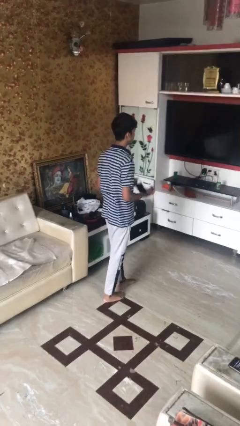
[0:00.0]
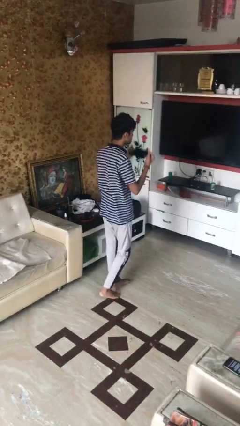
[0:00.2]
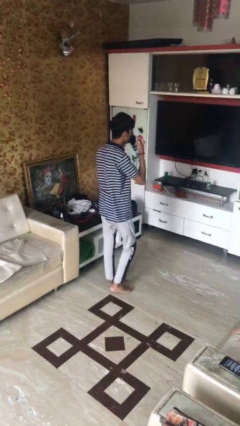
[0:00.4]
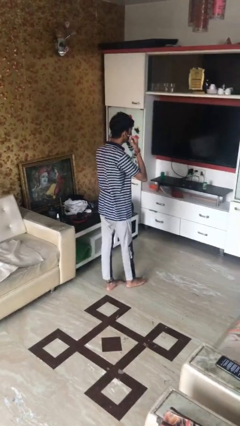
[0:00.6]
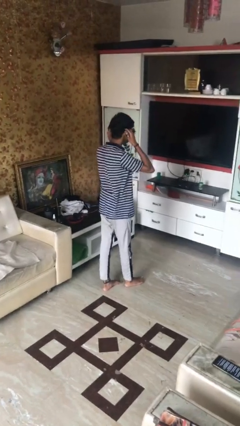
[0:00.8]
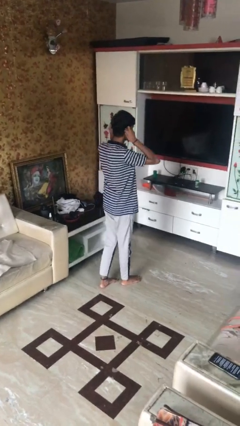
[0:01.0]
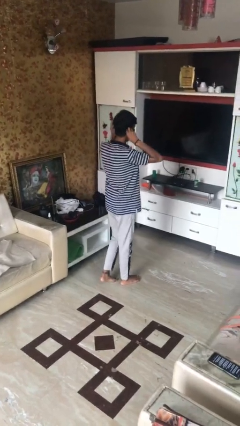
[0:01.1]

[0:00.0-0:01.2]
person puts on facemask

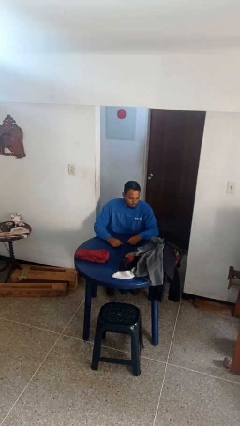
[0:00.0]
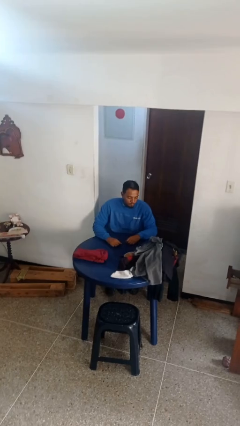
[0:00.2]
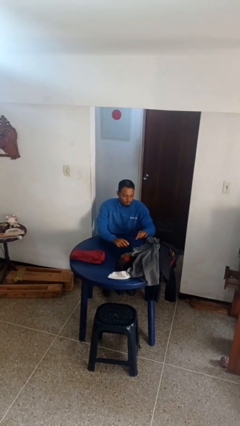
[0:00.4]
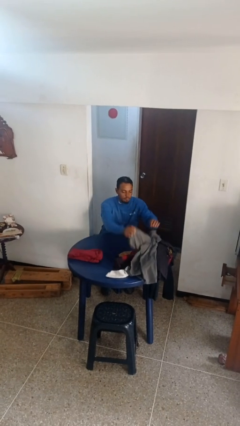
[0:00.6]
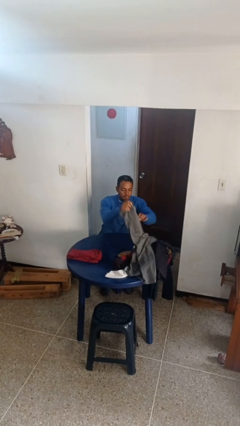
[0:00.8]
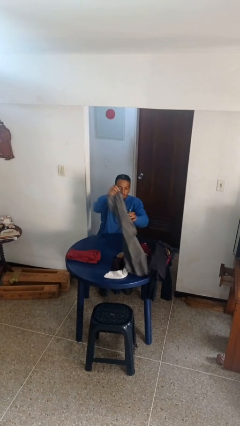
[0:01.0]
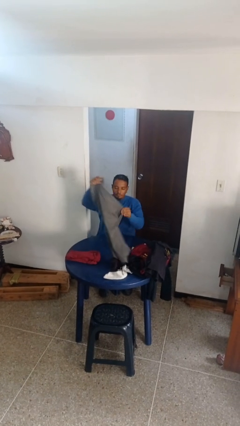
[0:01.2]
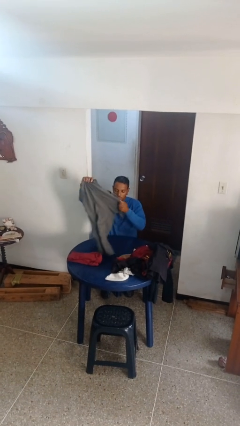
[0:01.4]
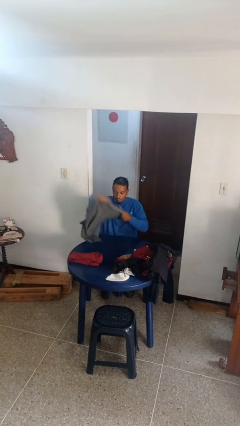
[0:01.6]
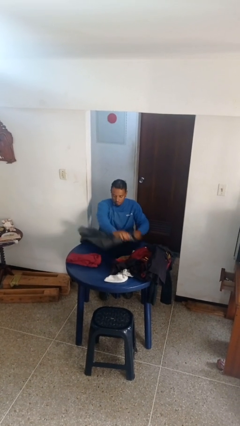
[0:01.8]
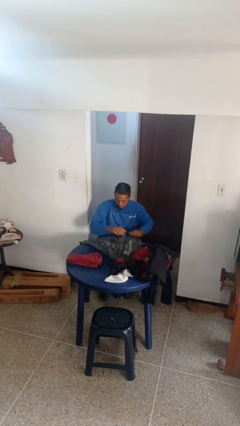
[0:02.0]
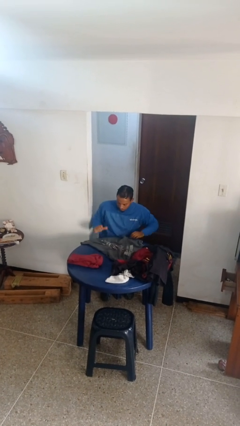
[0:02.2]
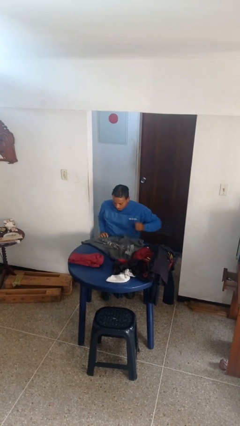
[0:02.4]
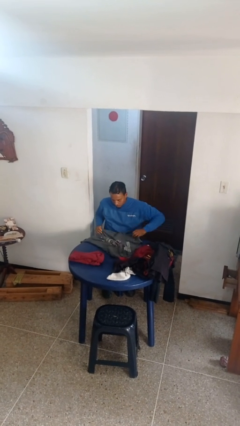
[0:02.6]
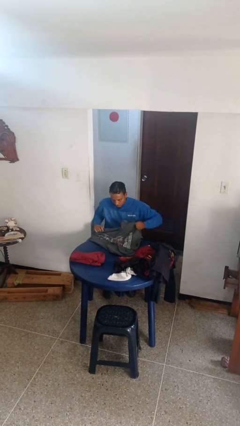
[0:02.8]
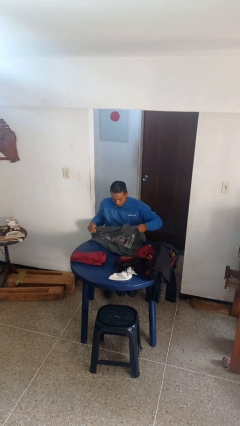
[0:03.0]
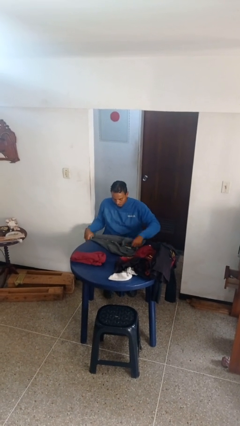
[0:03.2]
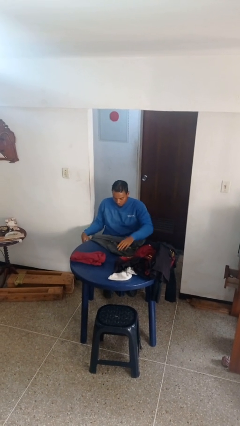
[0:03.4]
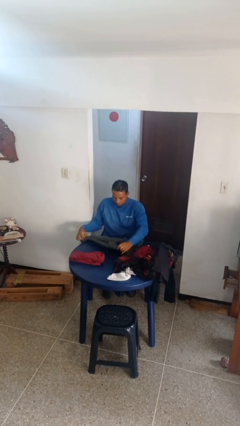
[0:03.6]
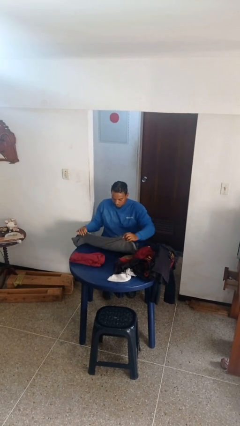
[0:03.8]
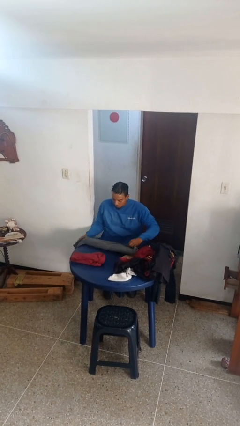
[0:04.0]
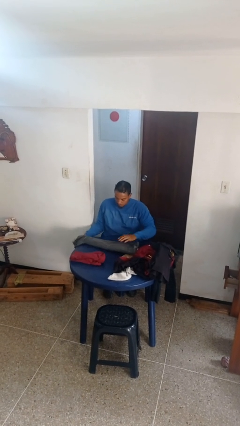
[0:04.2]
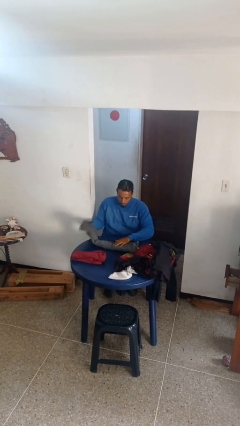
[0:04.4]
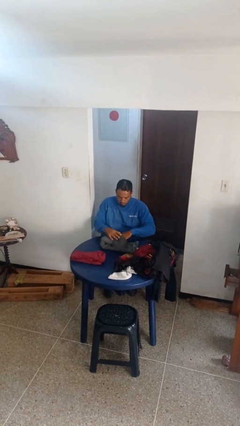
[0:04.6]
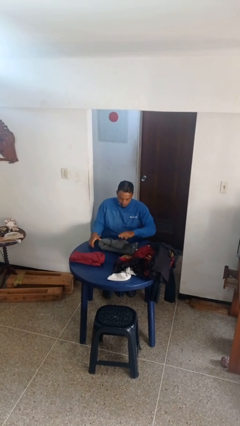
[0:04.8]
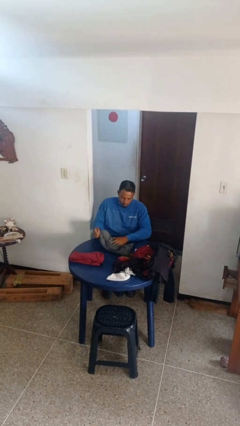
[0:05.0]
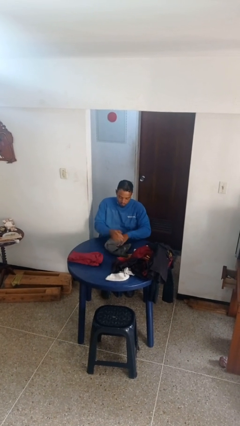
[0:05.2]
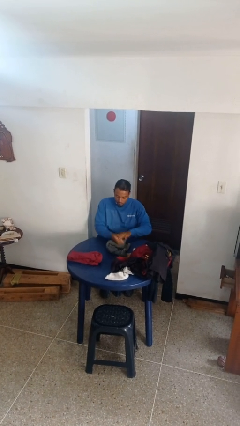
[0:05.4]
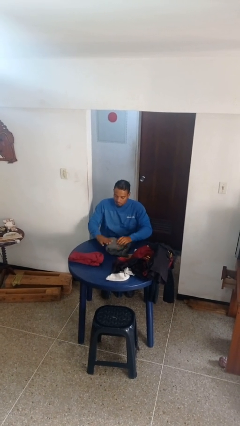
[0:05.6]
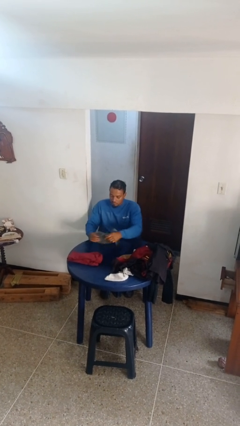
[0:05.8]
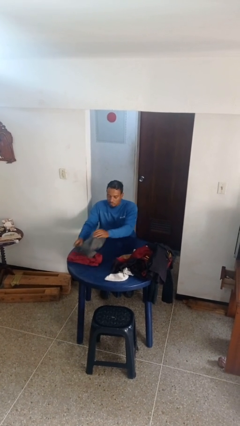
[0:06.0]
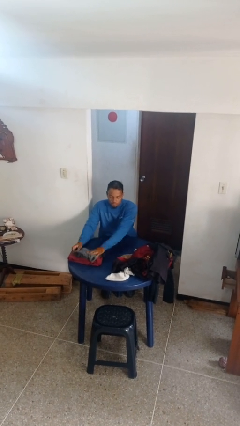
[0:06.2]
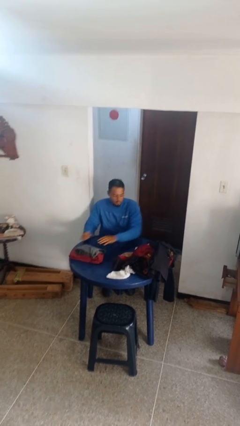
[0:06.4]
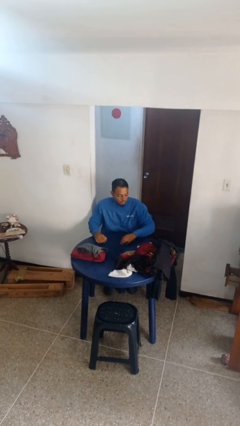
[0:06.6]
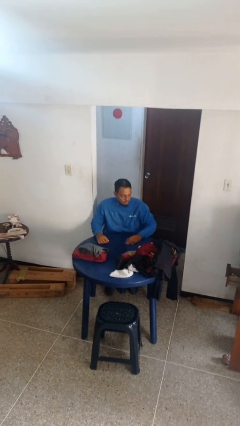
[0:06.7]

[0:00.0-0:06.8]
person folds shirt

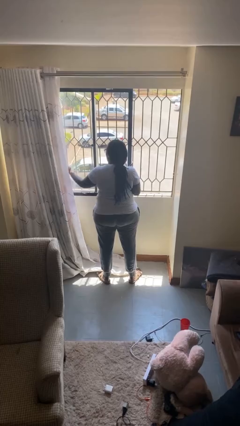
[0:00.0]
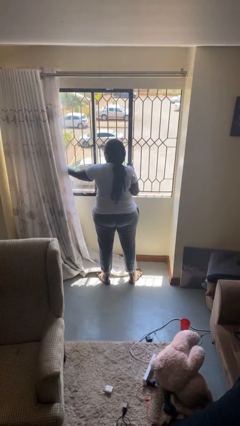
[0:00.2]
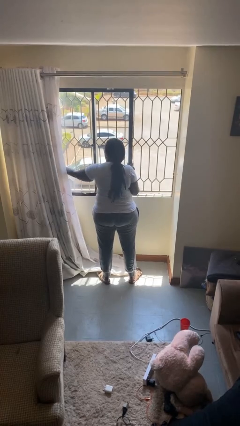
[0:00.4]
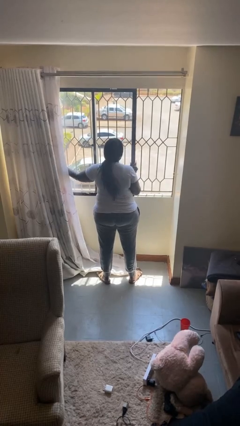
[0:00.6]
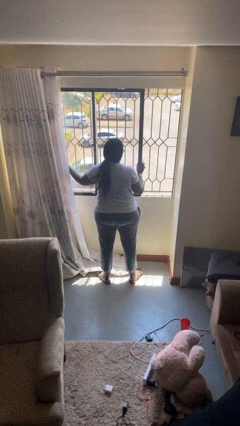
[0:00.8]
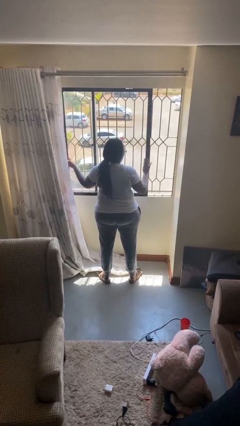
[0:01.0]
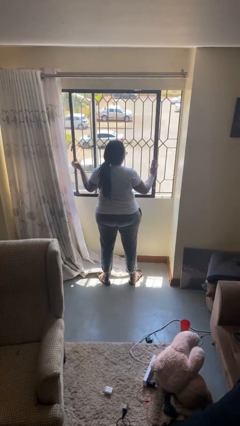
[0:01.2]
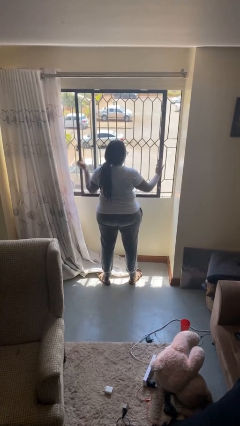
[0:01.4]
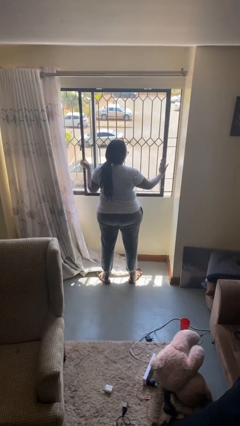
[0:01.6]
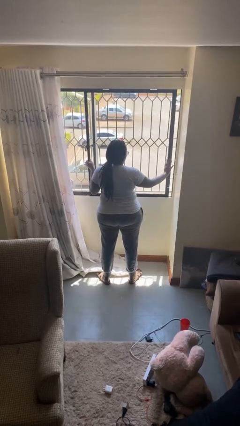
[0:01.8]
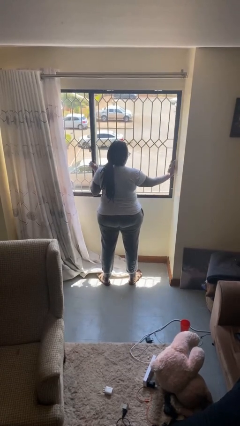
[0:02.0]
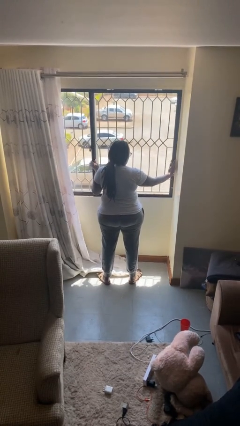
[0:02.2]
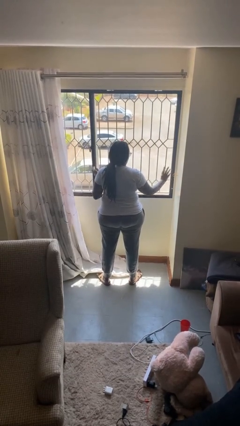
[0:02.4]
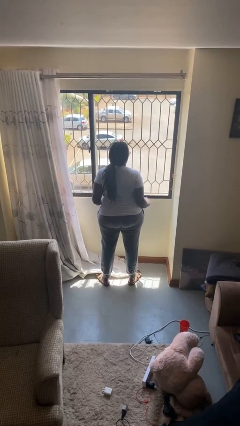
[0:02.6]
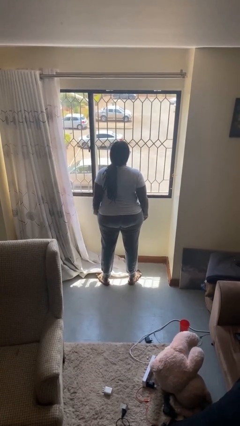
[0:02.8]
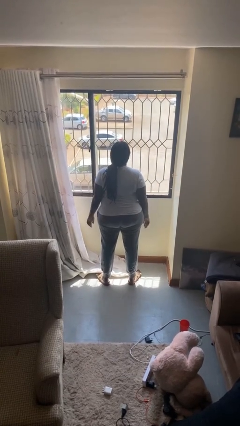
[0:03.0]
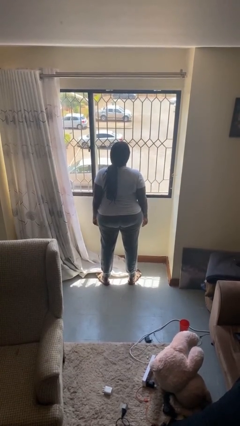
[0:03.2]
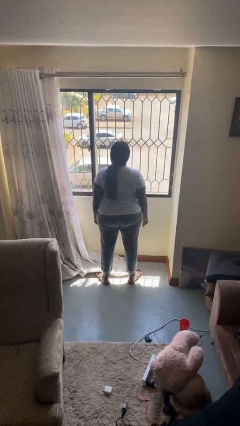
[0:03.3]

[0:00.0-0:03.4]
person closes home window

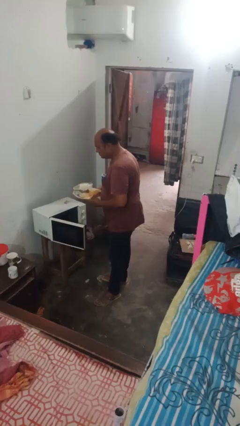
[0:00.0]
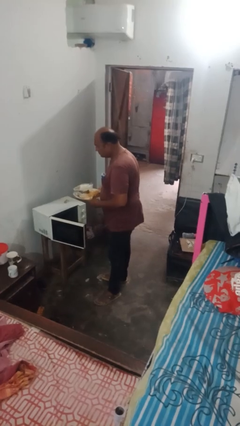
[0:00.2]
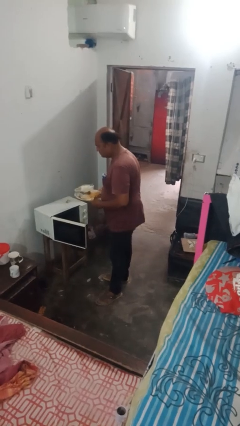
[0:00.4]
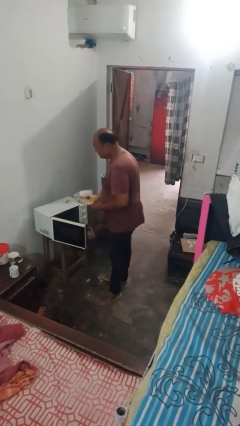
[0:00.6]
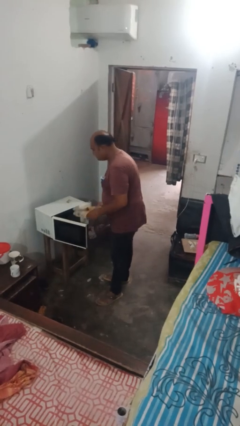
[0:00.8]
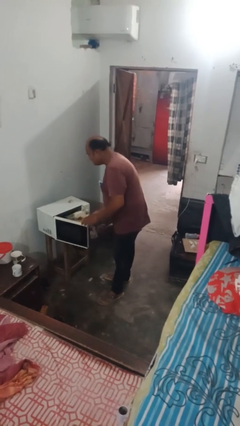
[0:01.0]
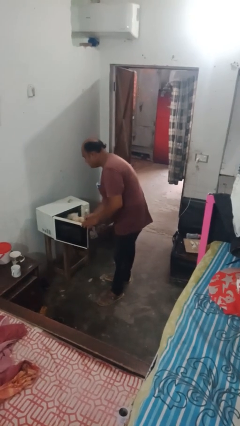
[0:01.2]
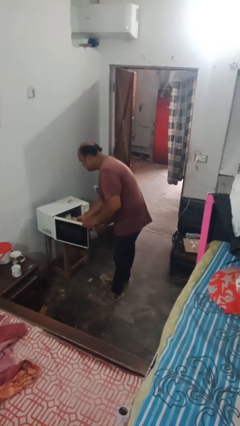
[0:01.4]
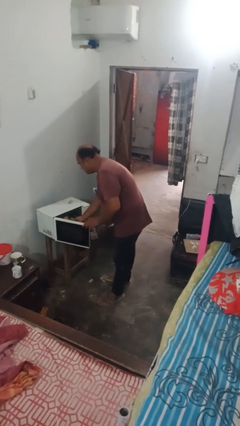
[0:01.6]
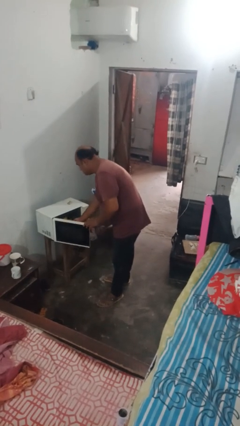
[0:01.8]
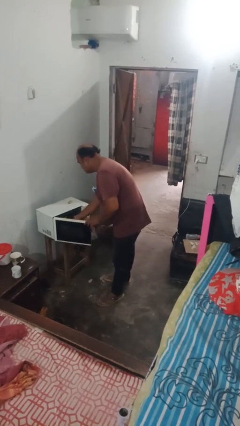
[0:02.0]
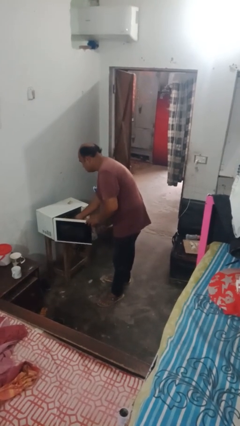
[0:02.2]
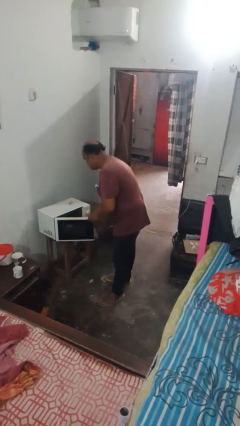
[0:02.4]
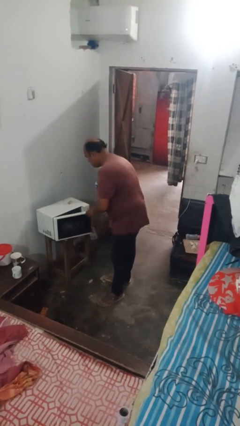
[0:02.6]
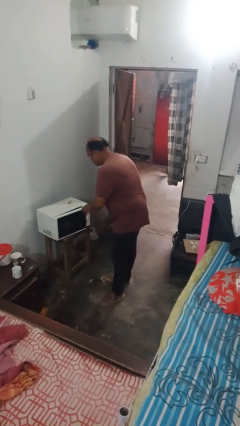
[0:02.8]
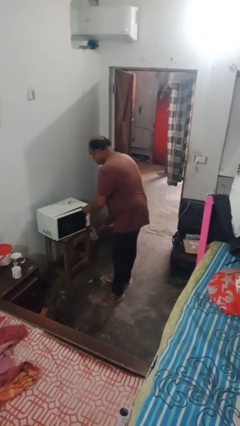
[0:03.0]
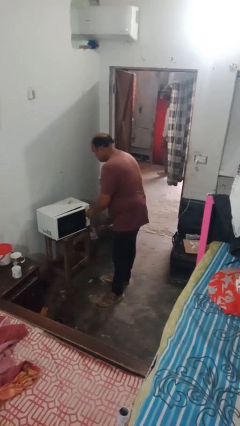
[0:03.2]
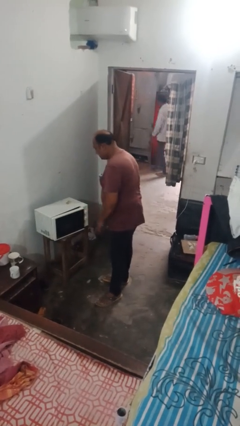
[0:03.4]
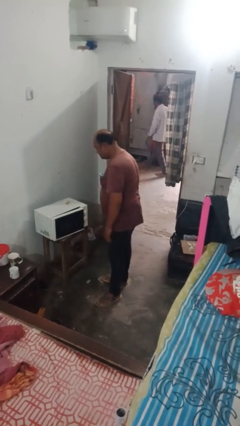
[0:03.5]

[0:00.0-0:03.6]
person puts object into microwave

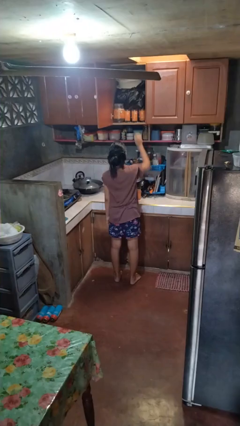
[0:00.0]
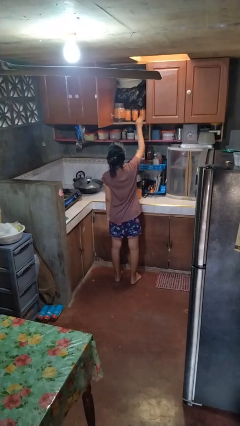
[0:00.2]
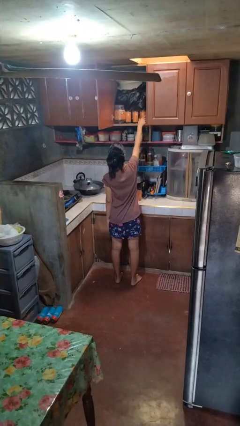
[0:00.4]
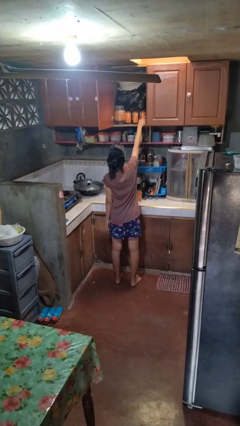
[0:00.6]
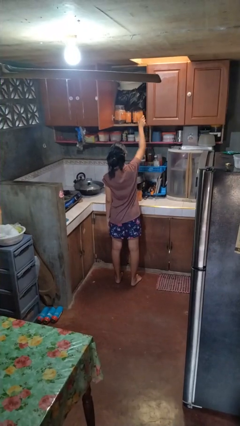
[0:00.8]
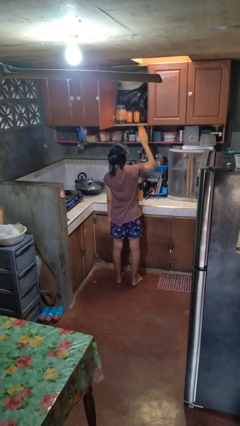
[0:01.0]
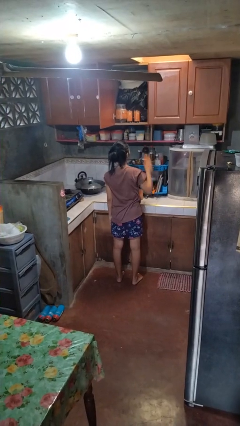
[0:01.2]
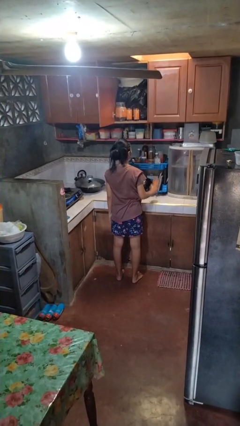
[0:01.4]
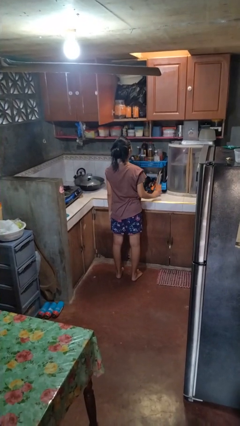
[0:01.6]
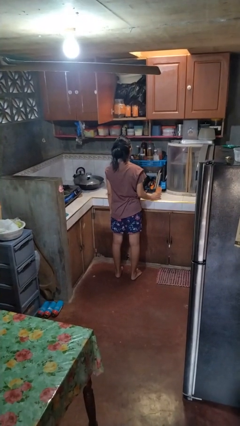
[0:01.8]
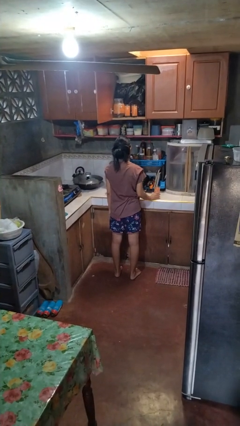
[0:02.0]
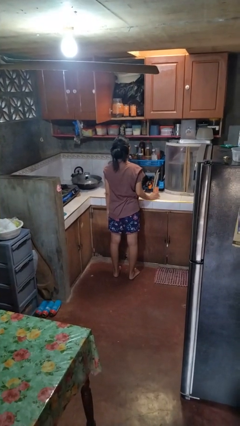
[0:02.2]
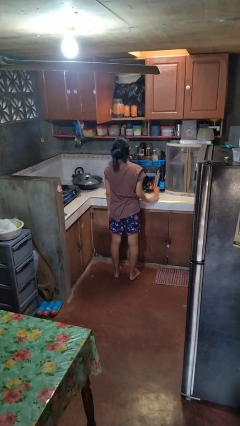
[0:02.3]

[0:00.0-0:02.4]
person takes object from cabinet
